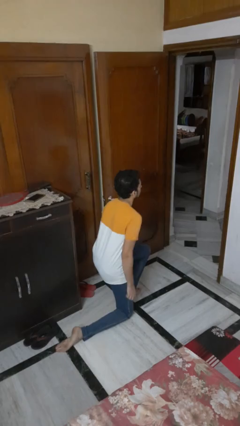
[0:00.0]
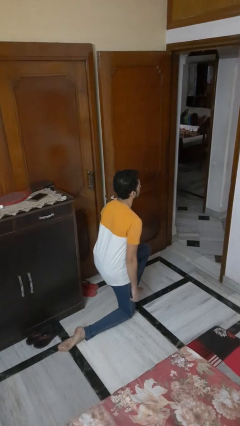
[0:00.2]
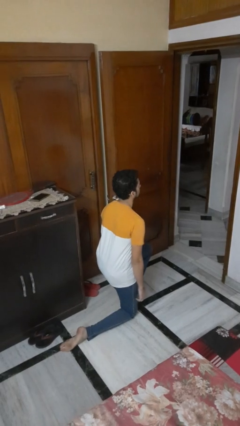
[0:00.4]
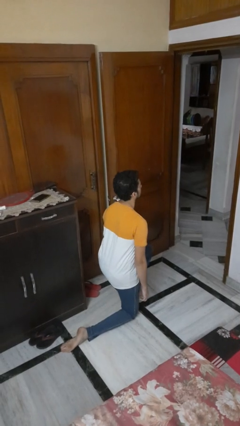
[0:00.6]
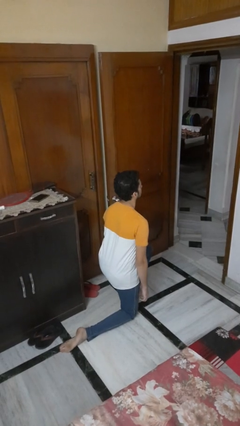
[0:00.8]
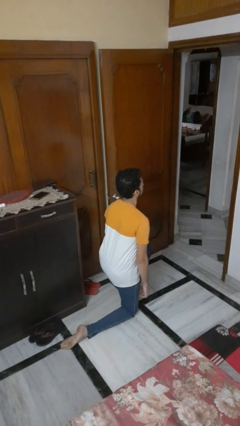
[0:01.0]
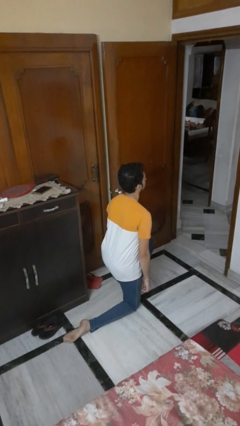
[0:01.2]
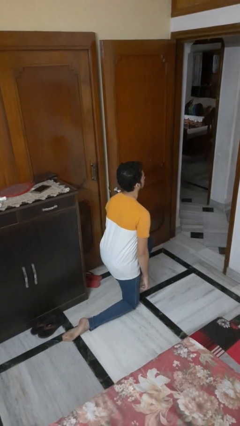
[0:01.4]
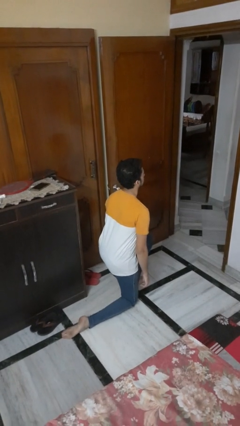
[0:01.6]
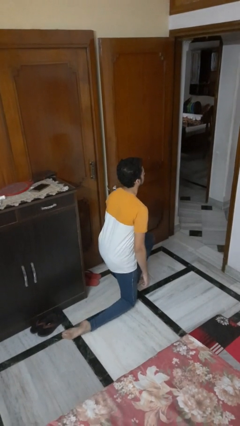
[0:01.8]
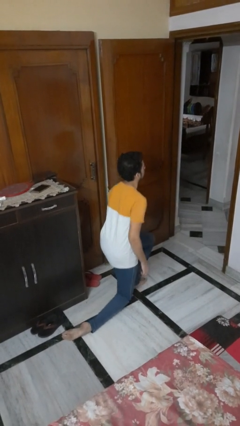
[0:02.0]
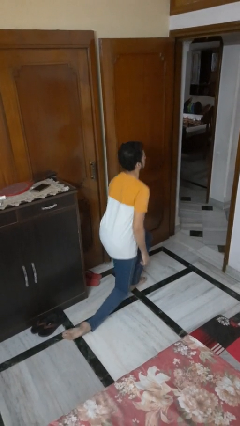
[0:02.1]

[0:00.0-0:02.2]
person kneels

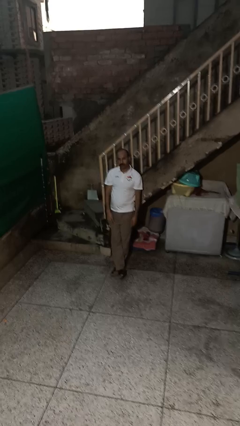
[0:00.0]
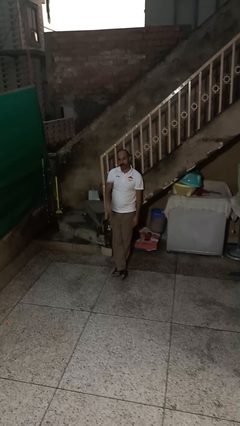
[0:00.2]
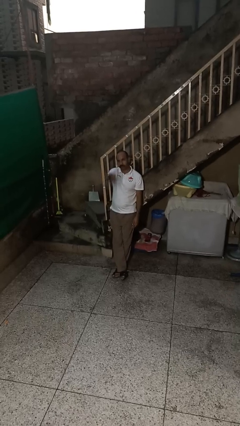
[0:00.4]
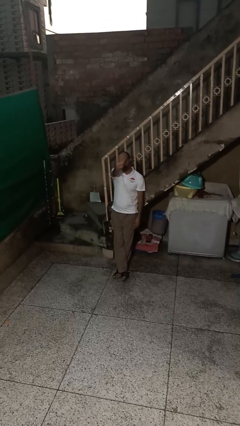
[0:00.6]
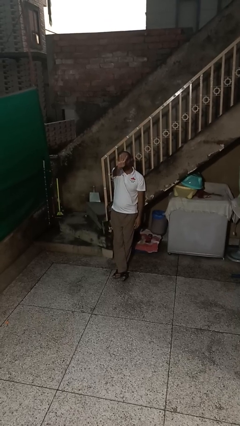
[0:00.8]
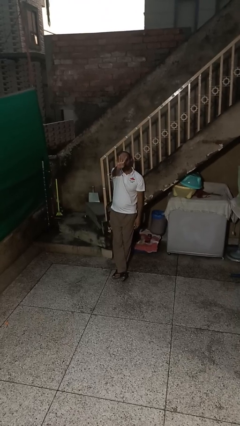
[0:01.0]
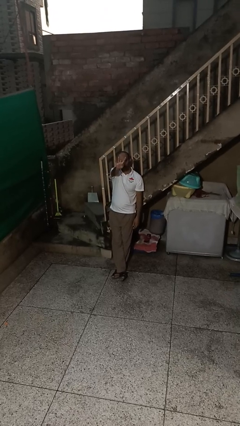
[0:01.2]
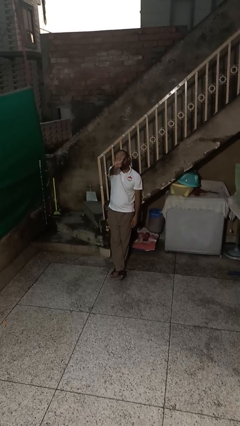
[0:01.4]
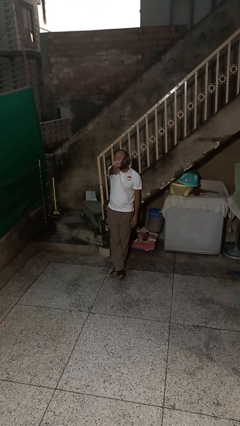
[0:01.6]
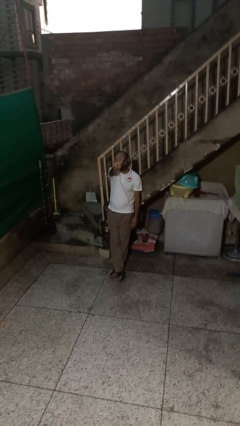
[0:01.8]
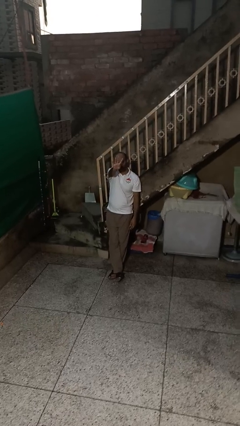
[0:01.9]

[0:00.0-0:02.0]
person gestures number four

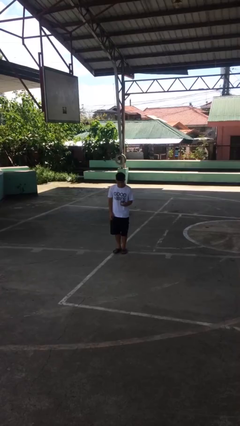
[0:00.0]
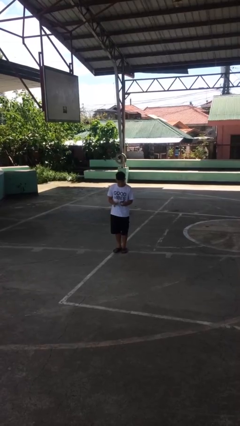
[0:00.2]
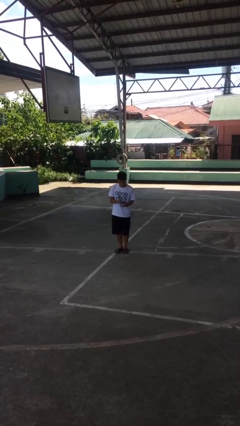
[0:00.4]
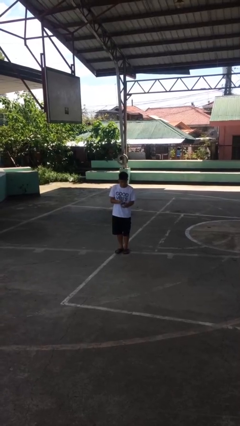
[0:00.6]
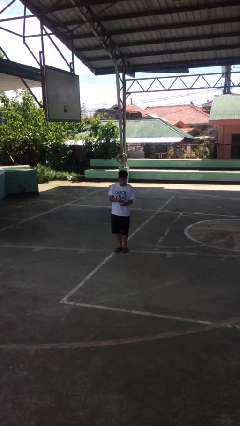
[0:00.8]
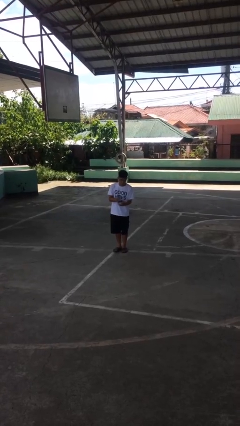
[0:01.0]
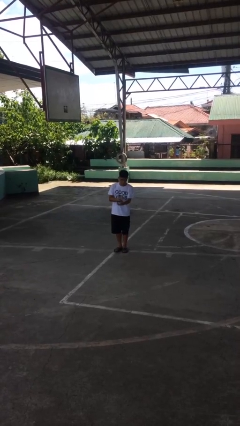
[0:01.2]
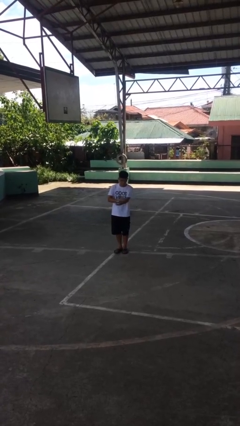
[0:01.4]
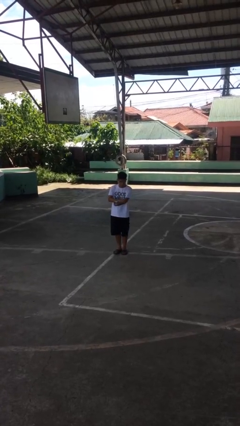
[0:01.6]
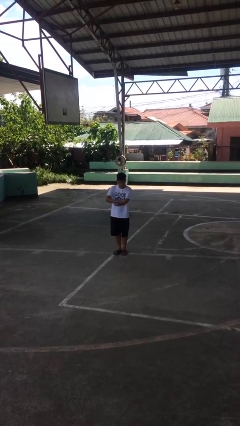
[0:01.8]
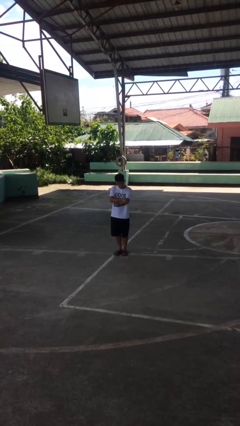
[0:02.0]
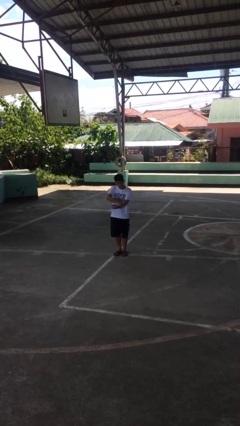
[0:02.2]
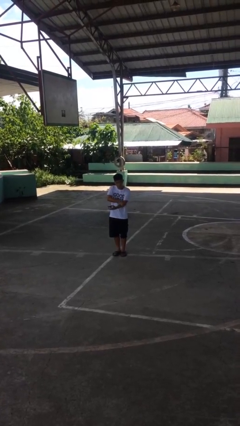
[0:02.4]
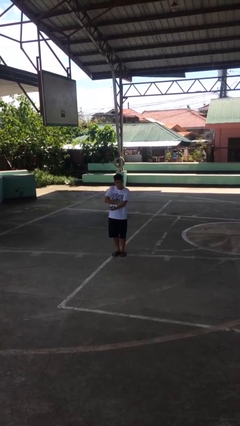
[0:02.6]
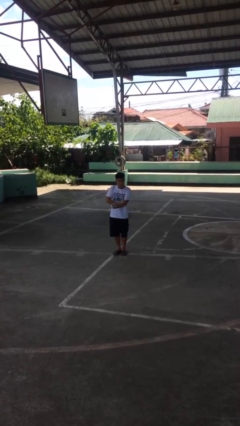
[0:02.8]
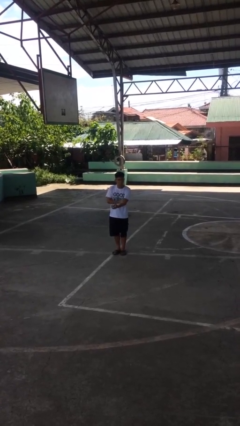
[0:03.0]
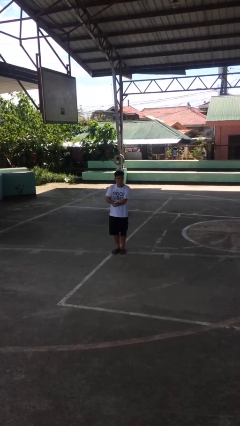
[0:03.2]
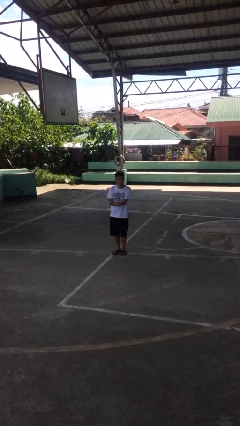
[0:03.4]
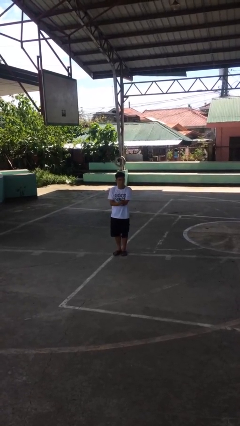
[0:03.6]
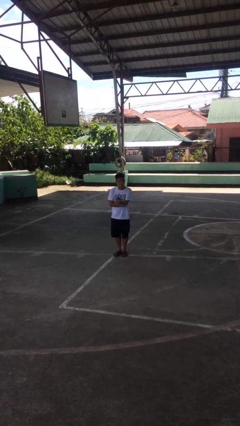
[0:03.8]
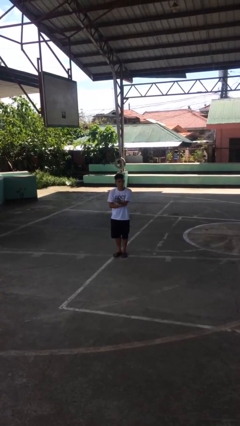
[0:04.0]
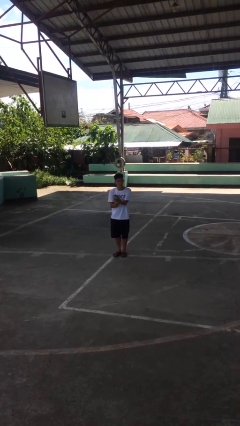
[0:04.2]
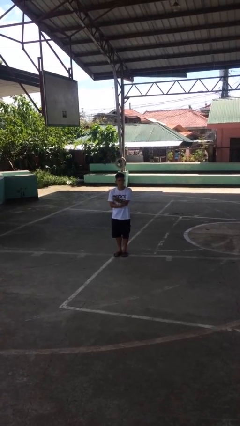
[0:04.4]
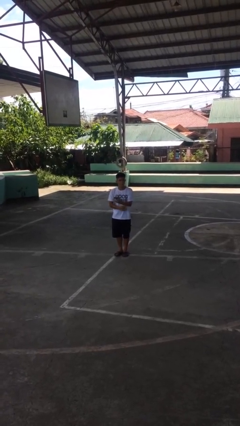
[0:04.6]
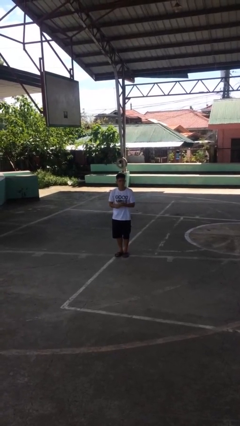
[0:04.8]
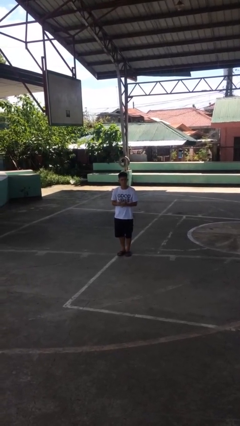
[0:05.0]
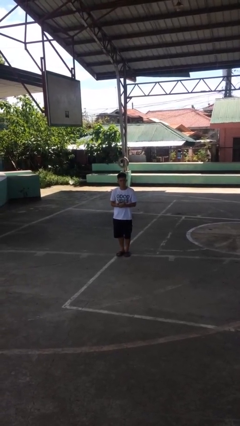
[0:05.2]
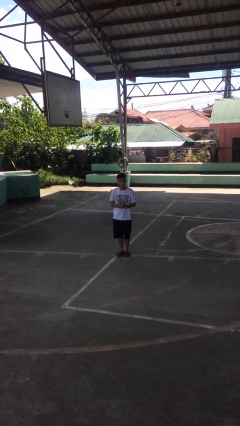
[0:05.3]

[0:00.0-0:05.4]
person applies sunscreen

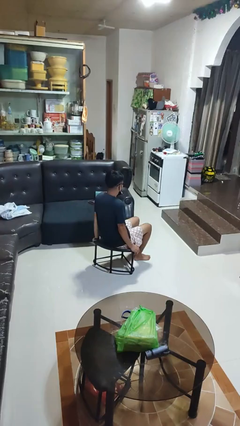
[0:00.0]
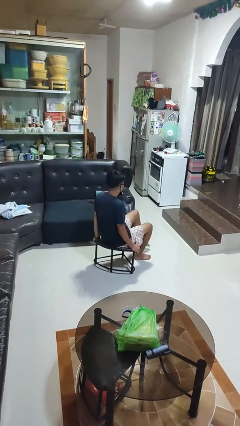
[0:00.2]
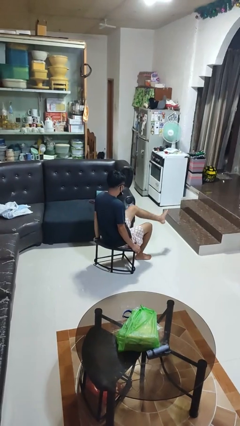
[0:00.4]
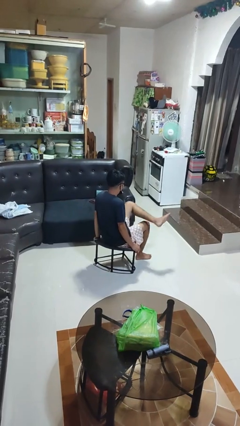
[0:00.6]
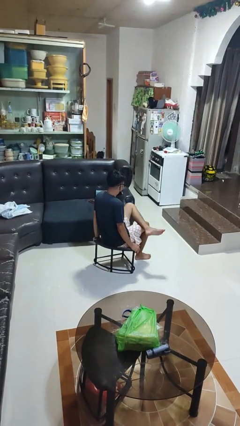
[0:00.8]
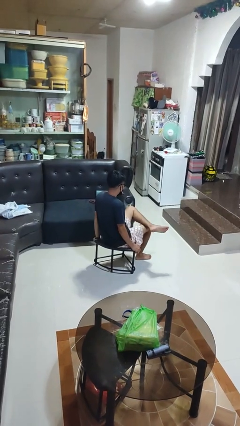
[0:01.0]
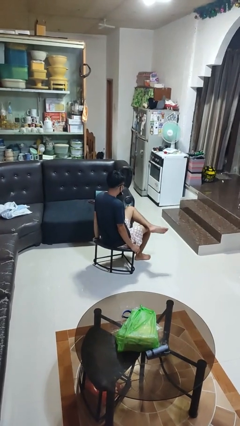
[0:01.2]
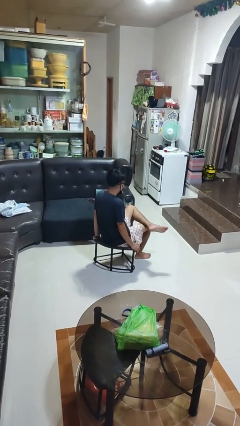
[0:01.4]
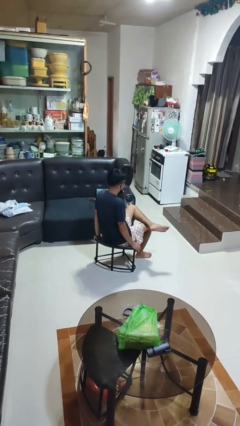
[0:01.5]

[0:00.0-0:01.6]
person crosses legs

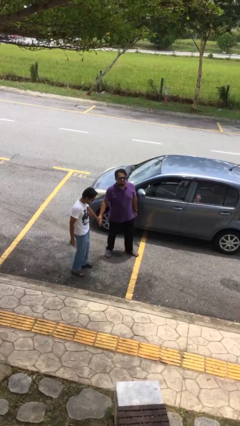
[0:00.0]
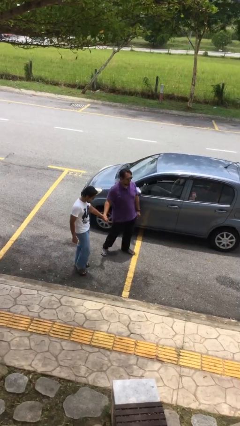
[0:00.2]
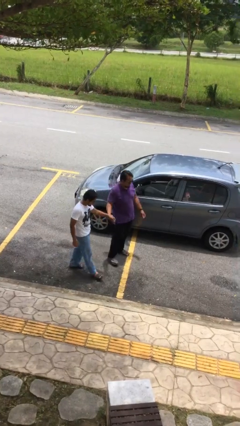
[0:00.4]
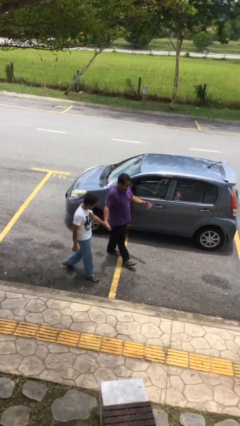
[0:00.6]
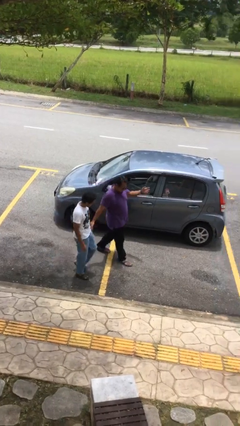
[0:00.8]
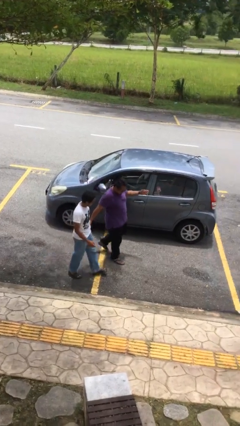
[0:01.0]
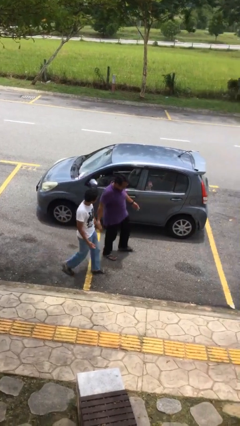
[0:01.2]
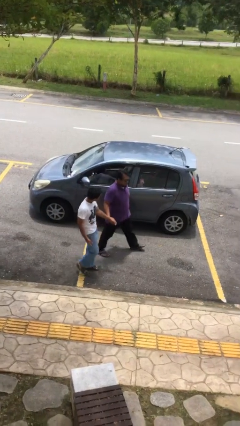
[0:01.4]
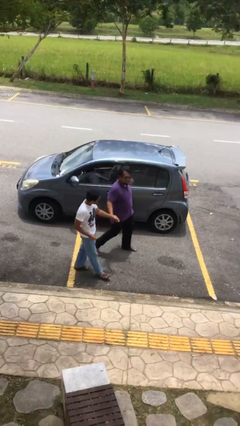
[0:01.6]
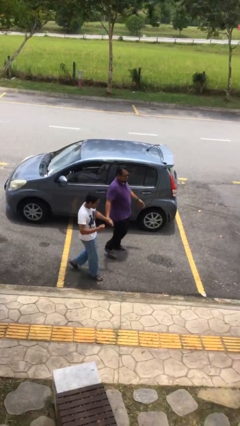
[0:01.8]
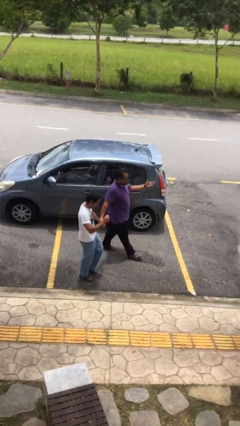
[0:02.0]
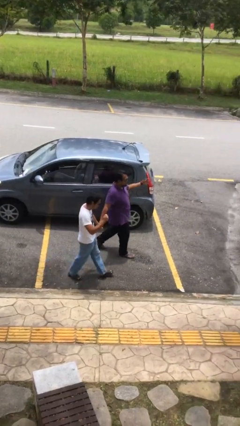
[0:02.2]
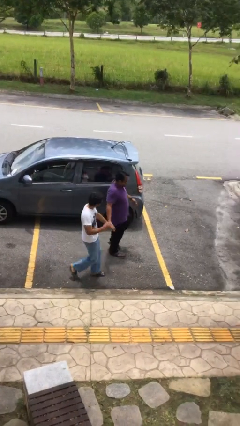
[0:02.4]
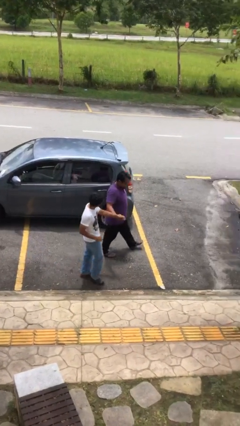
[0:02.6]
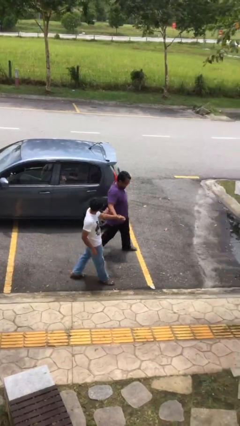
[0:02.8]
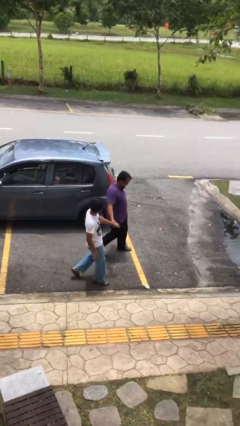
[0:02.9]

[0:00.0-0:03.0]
person holds hand

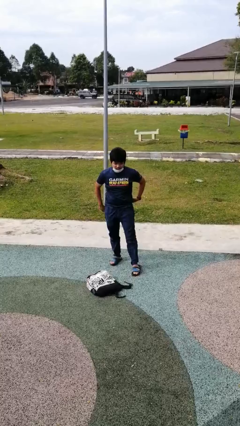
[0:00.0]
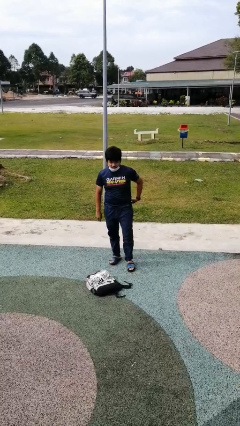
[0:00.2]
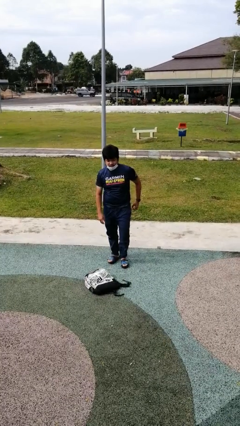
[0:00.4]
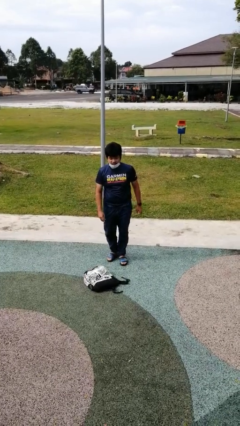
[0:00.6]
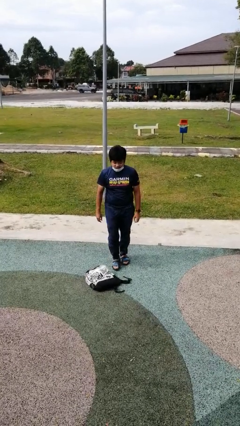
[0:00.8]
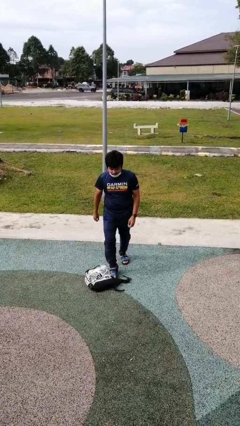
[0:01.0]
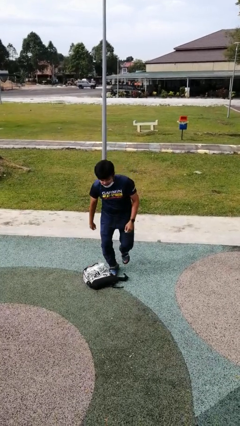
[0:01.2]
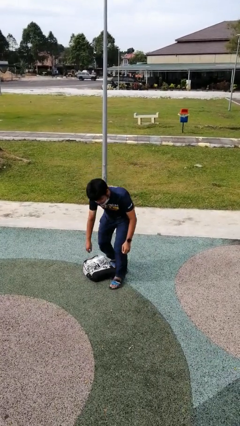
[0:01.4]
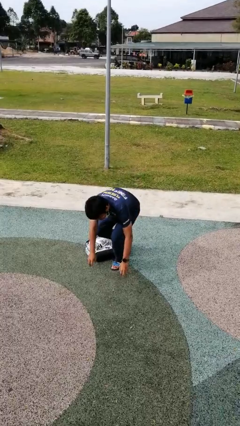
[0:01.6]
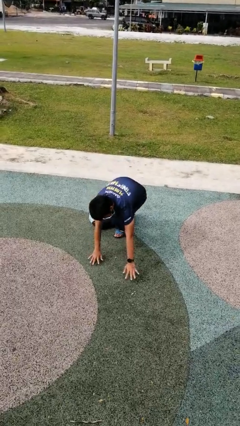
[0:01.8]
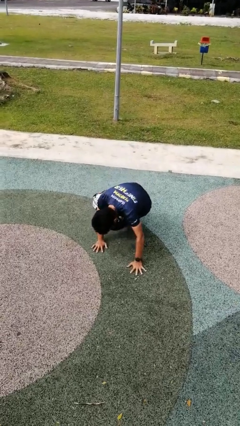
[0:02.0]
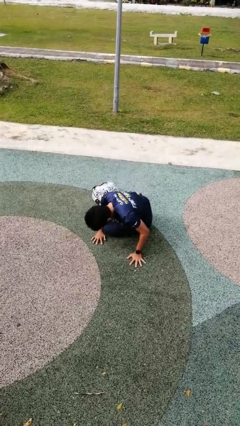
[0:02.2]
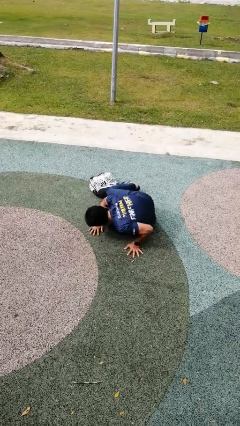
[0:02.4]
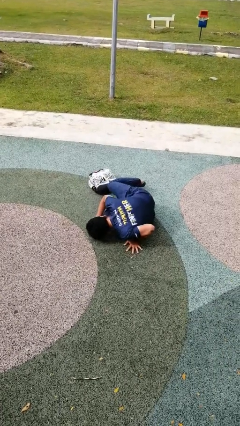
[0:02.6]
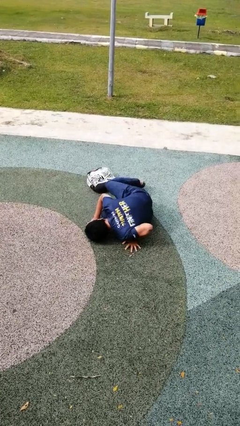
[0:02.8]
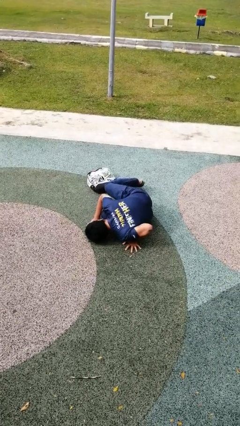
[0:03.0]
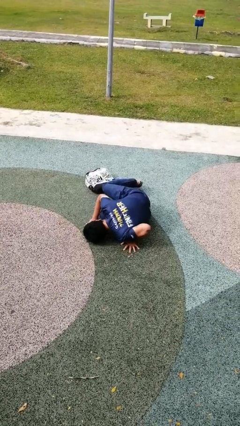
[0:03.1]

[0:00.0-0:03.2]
person trips on object on floor
